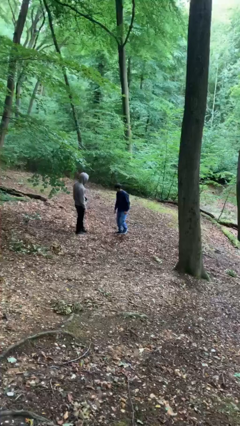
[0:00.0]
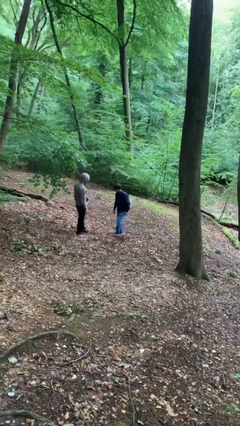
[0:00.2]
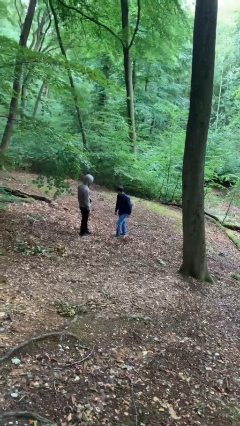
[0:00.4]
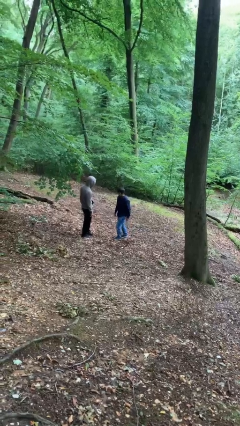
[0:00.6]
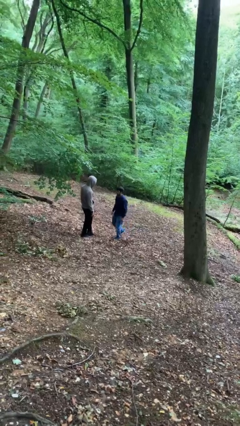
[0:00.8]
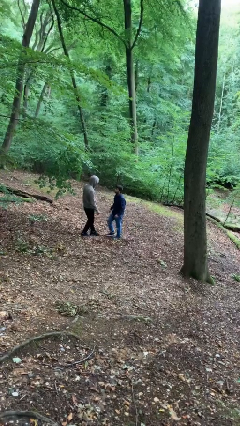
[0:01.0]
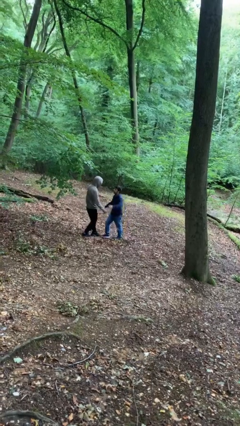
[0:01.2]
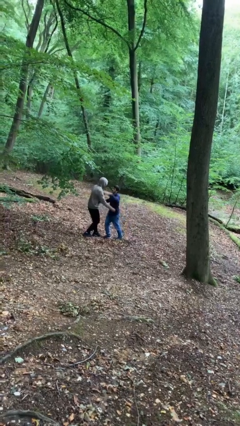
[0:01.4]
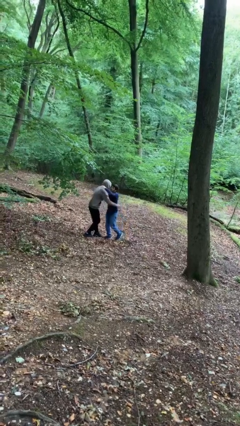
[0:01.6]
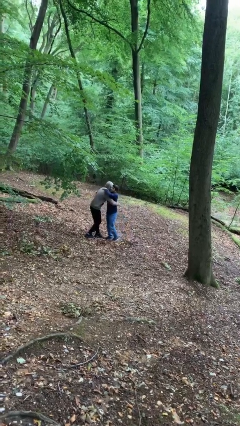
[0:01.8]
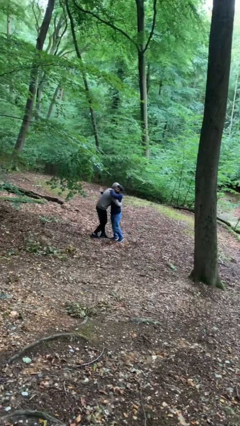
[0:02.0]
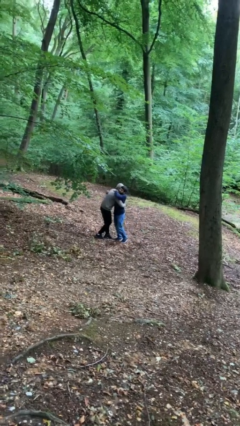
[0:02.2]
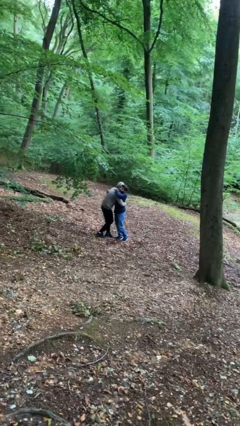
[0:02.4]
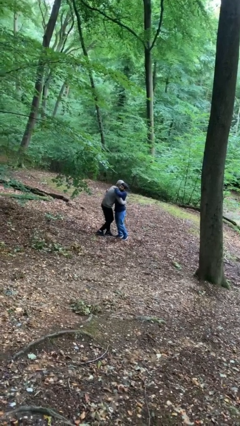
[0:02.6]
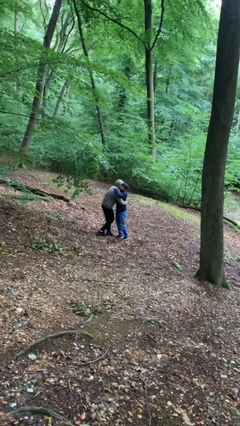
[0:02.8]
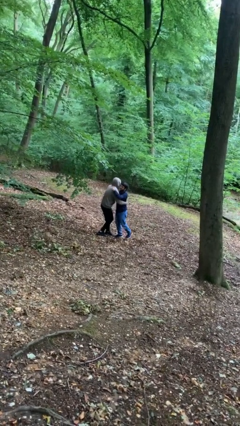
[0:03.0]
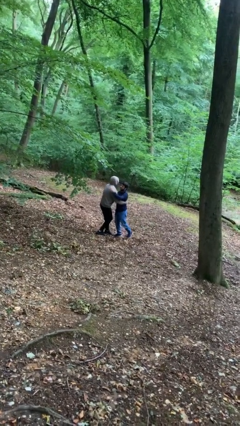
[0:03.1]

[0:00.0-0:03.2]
person embraces person

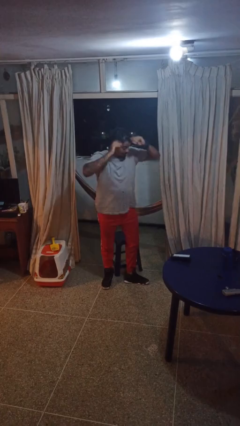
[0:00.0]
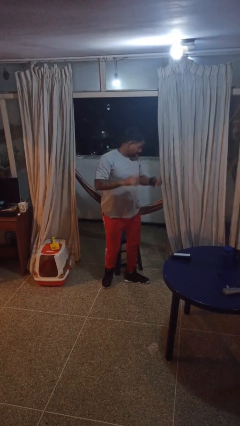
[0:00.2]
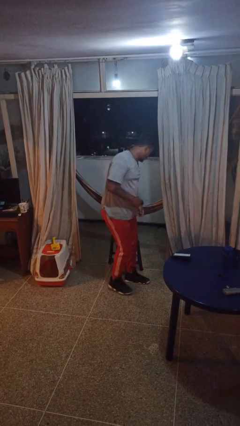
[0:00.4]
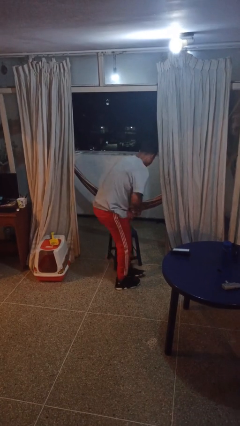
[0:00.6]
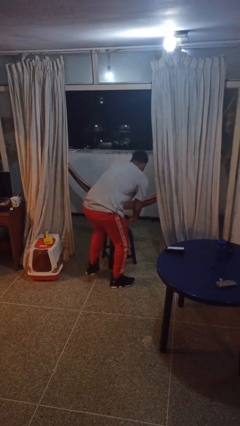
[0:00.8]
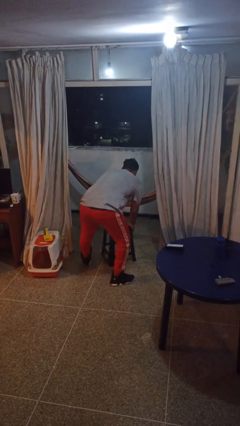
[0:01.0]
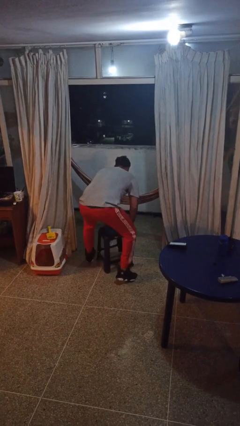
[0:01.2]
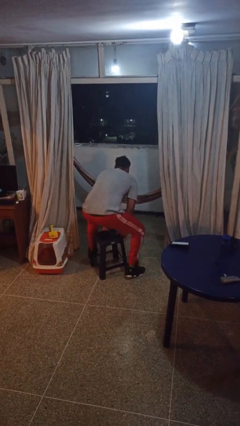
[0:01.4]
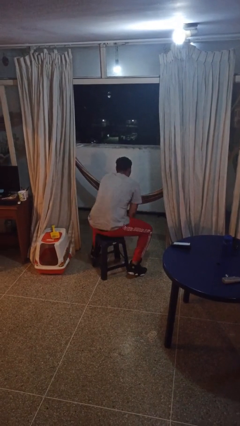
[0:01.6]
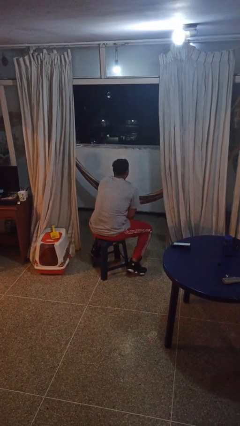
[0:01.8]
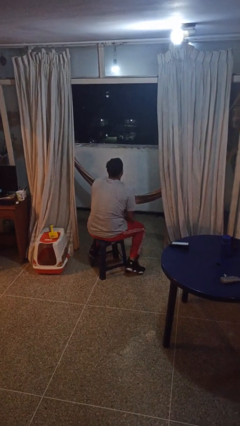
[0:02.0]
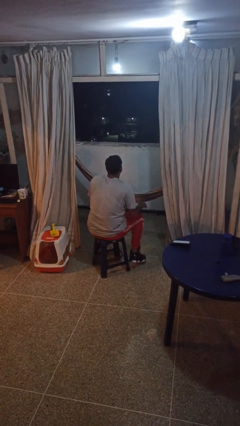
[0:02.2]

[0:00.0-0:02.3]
person sits down

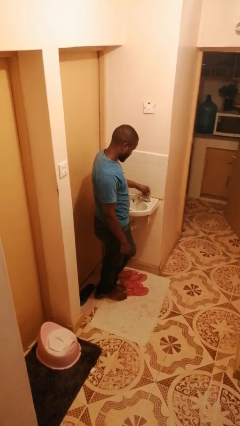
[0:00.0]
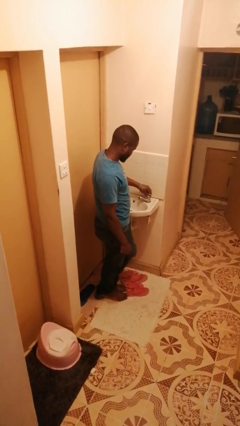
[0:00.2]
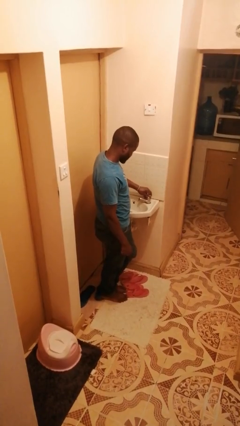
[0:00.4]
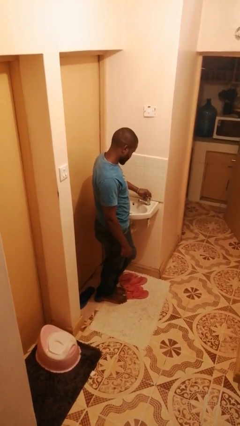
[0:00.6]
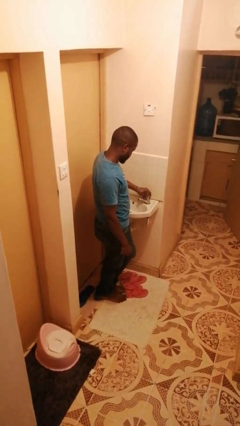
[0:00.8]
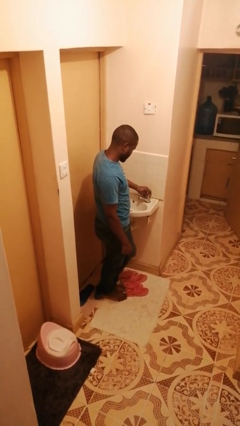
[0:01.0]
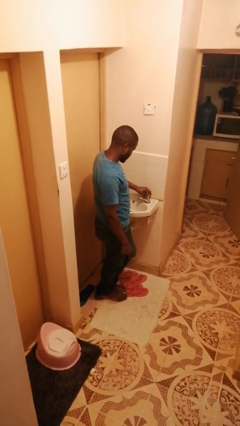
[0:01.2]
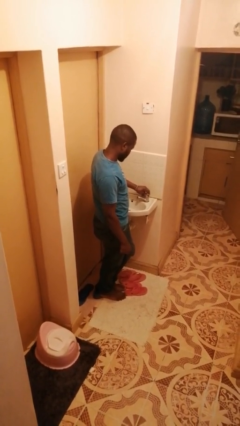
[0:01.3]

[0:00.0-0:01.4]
person turns off faucet

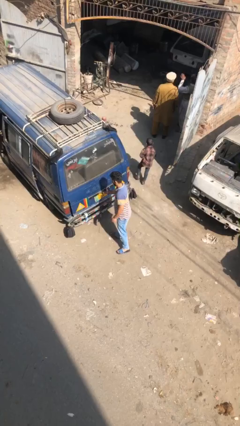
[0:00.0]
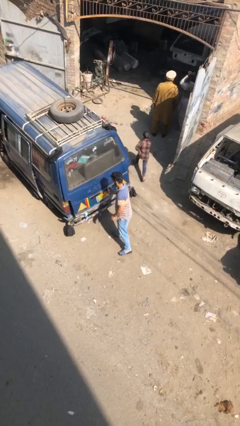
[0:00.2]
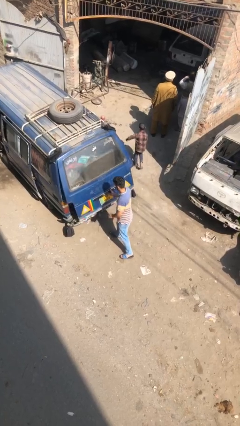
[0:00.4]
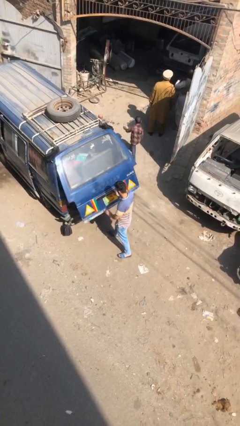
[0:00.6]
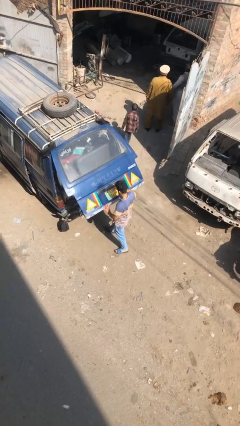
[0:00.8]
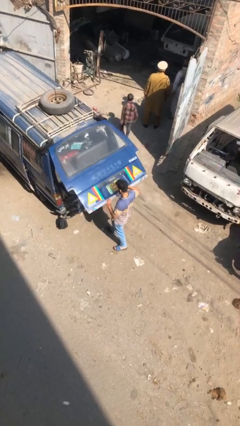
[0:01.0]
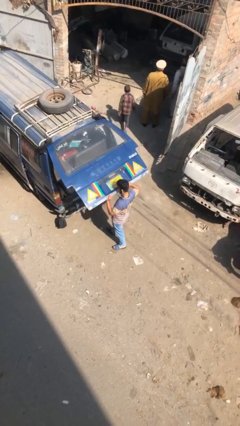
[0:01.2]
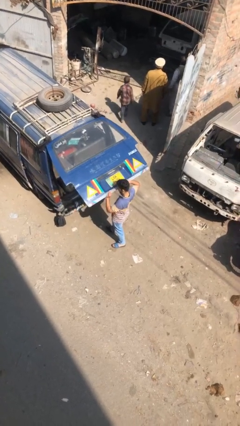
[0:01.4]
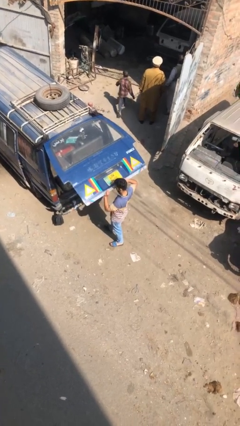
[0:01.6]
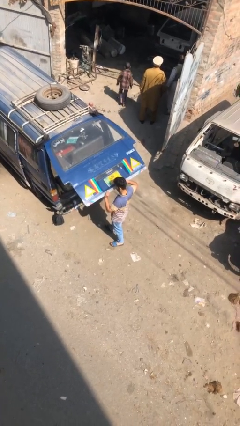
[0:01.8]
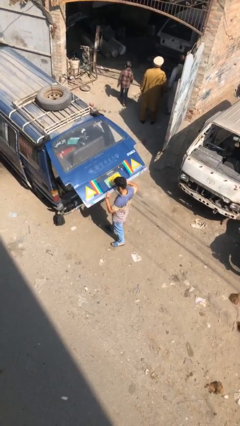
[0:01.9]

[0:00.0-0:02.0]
person opens car trunk

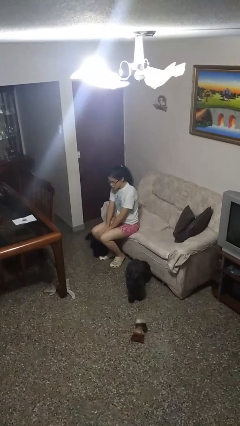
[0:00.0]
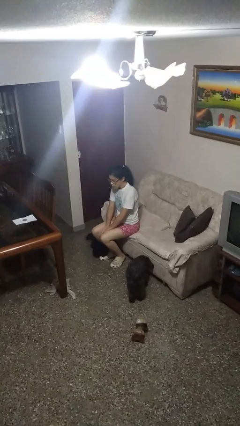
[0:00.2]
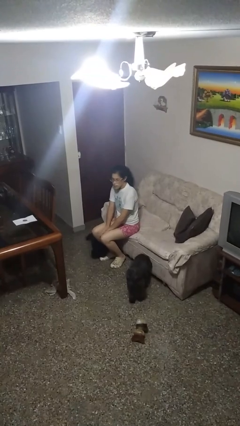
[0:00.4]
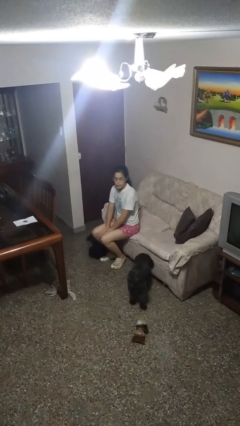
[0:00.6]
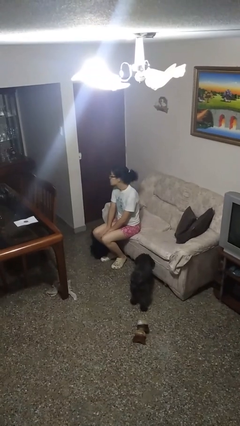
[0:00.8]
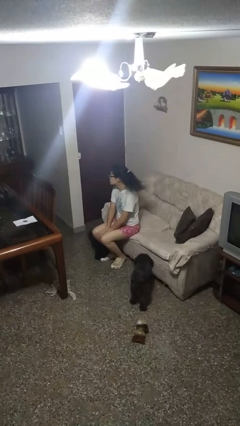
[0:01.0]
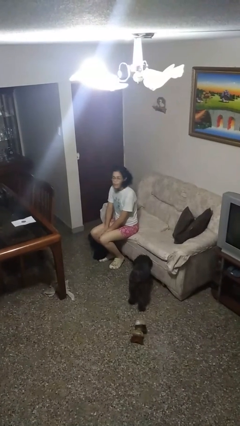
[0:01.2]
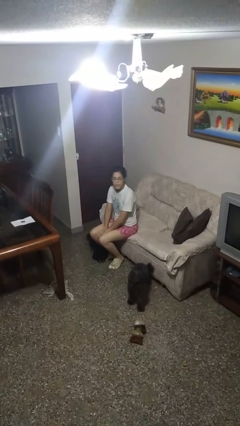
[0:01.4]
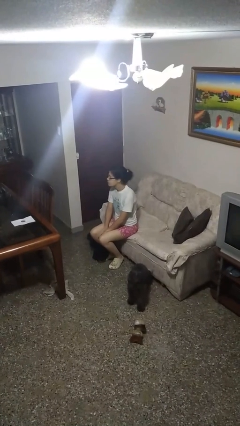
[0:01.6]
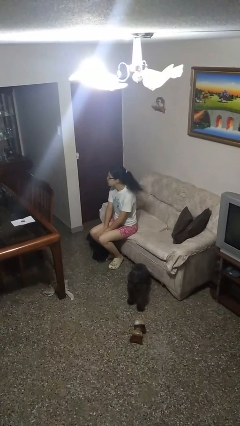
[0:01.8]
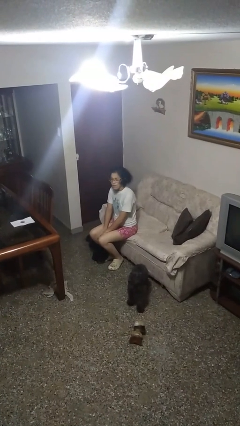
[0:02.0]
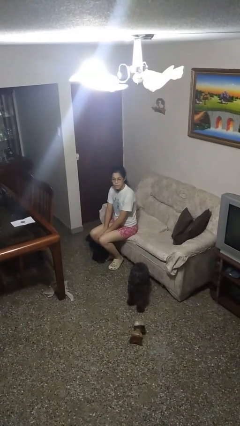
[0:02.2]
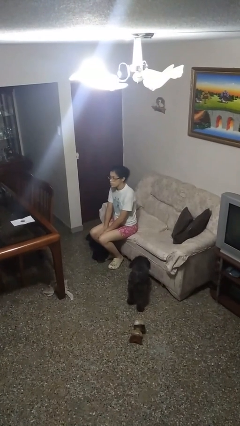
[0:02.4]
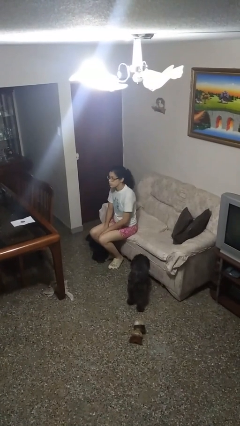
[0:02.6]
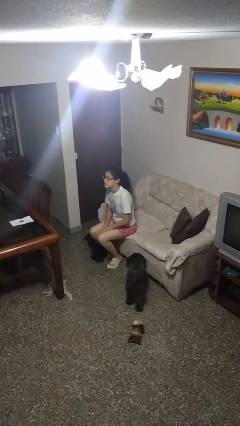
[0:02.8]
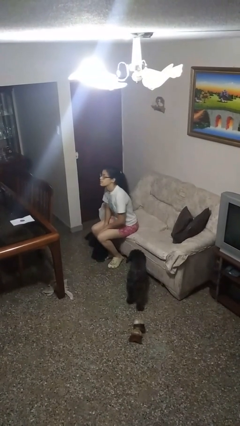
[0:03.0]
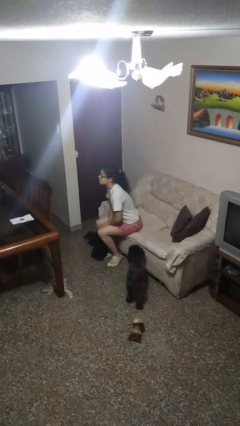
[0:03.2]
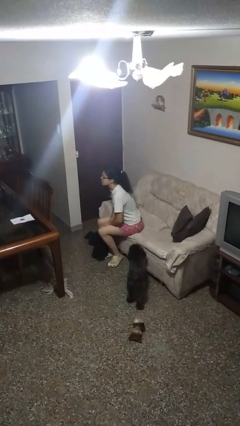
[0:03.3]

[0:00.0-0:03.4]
person shakes head

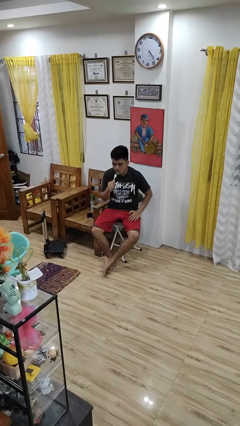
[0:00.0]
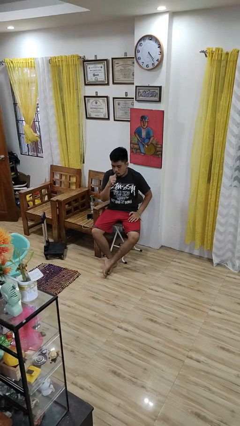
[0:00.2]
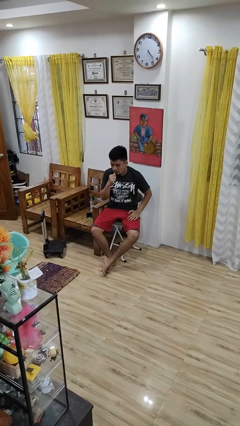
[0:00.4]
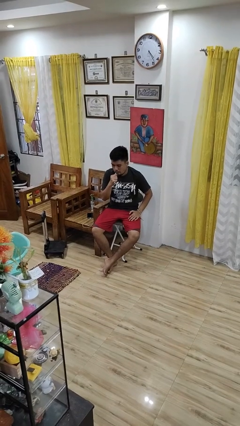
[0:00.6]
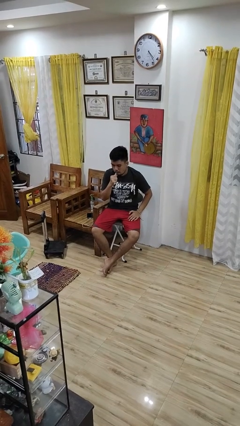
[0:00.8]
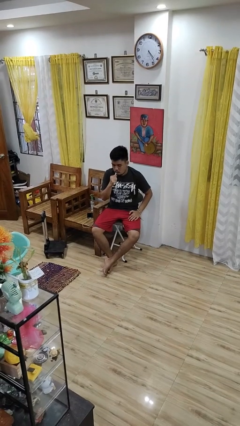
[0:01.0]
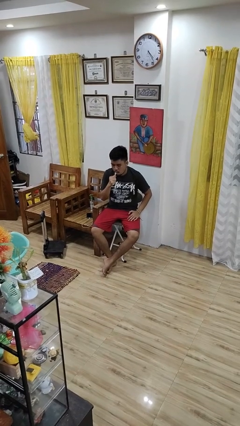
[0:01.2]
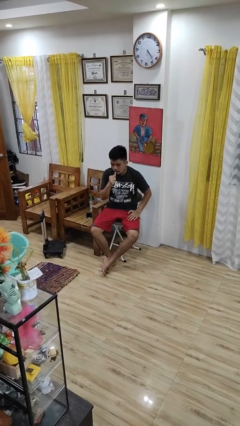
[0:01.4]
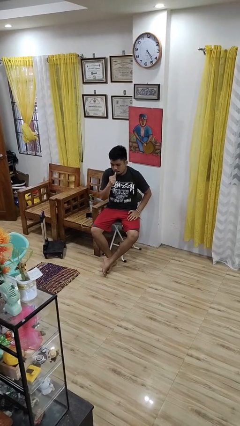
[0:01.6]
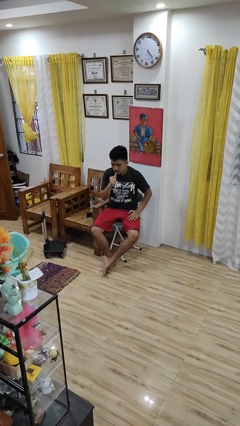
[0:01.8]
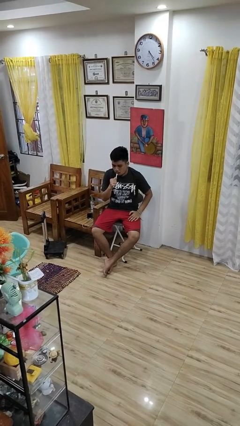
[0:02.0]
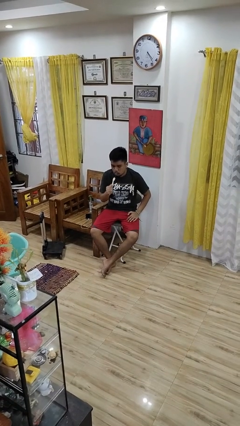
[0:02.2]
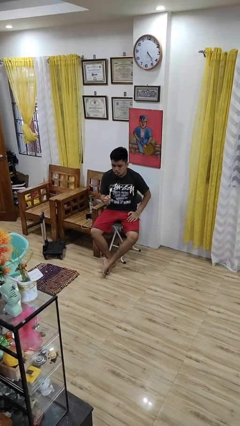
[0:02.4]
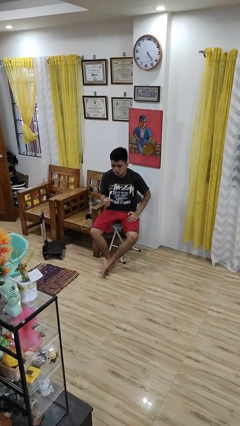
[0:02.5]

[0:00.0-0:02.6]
person brushes teeth

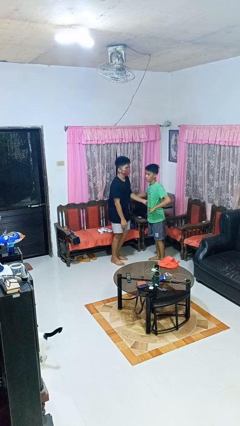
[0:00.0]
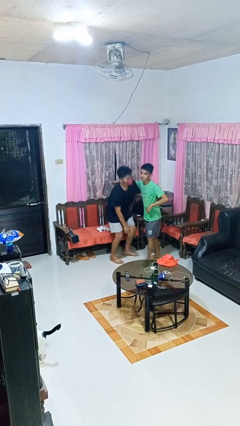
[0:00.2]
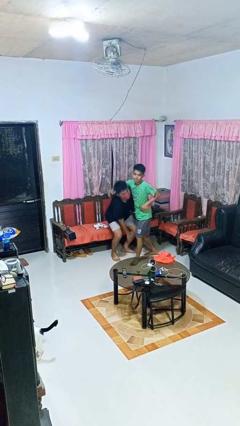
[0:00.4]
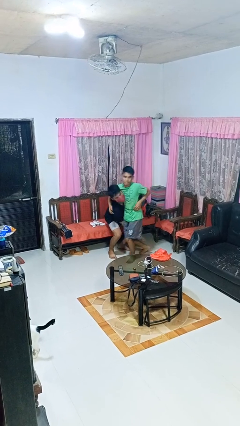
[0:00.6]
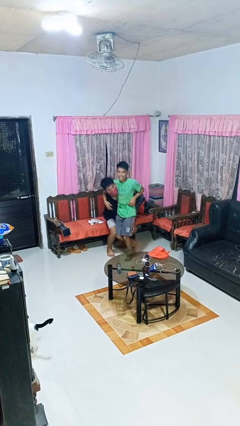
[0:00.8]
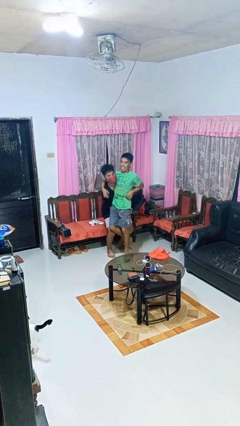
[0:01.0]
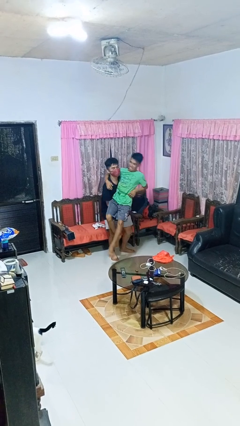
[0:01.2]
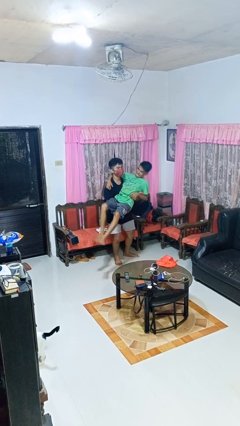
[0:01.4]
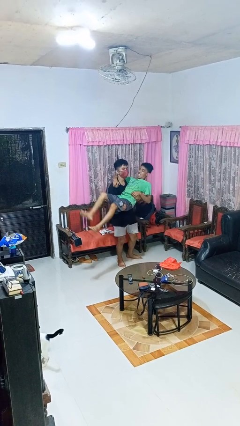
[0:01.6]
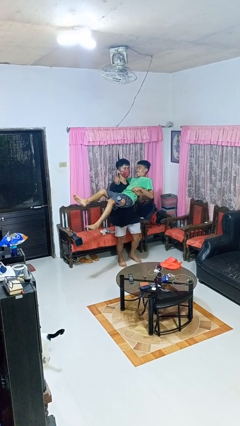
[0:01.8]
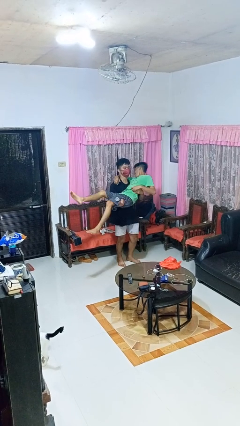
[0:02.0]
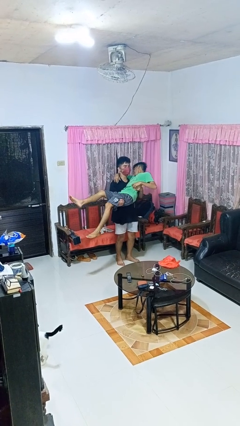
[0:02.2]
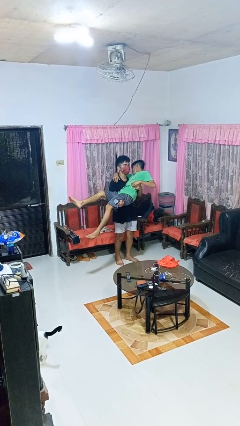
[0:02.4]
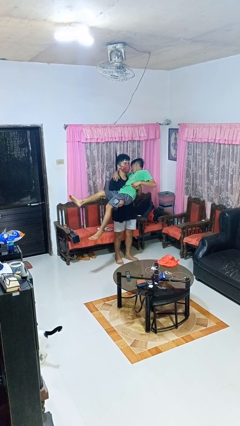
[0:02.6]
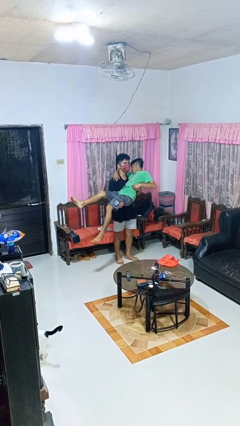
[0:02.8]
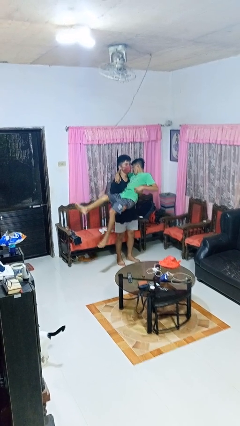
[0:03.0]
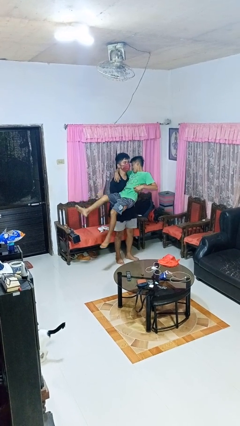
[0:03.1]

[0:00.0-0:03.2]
person picks up person
